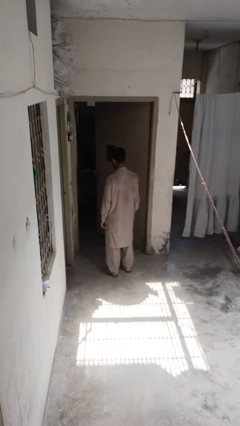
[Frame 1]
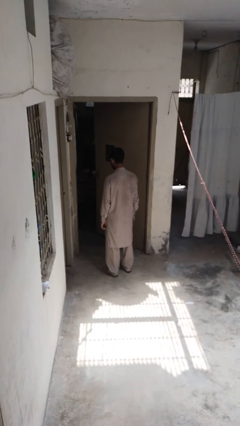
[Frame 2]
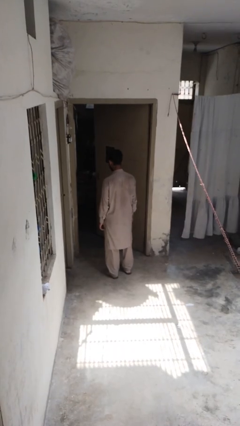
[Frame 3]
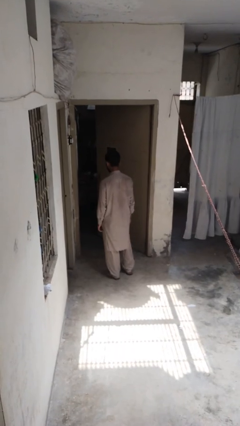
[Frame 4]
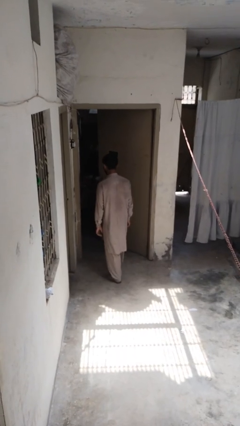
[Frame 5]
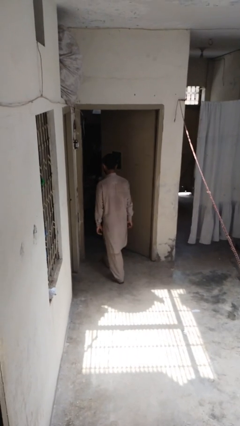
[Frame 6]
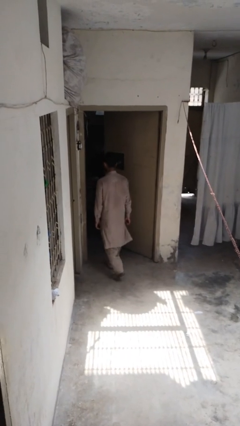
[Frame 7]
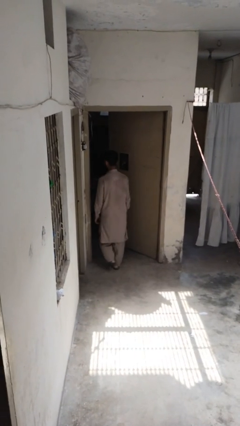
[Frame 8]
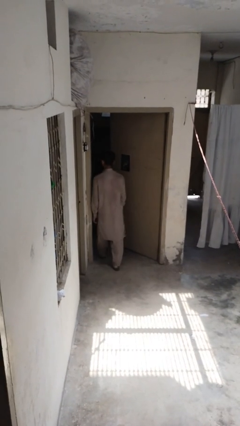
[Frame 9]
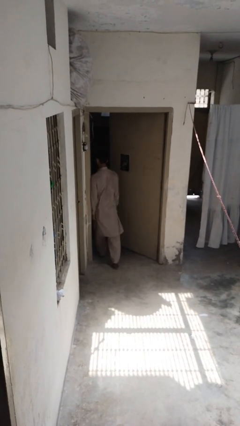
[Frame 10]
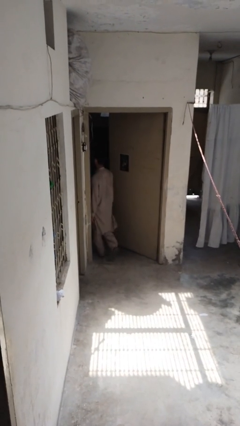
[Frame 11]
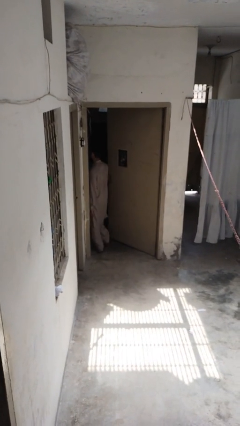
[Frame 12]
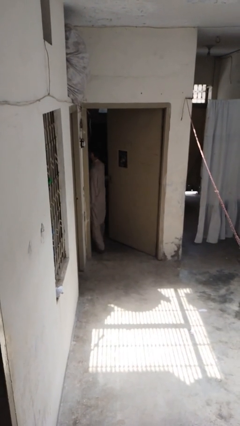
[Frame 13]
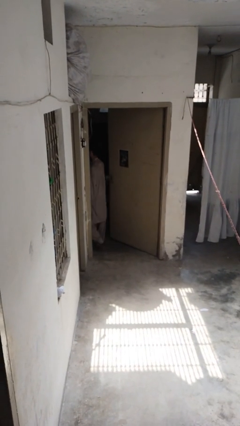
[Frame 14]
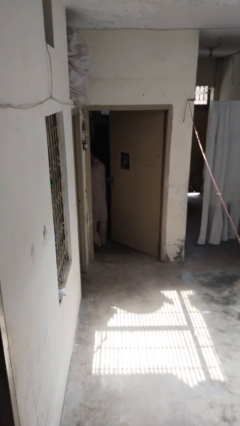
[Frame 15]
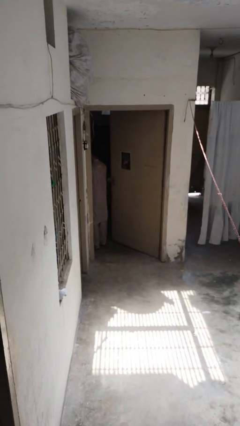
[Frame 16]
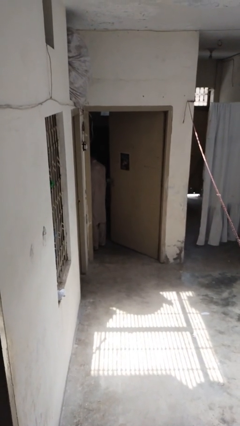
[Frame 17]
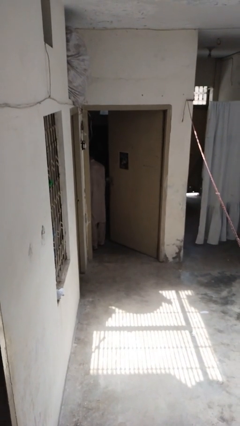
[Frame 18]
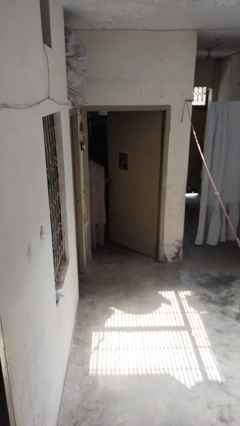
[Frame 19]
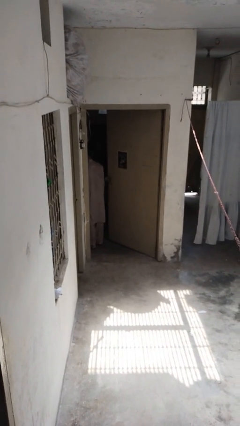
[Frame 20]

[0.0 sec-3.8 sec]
person bumps into wall

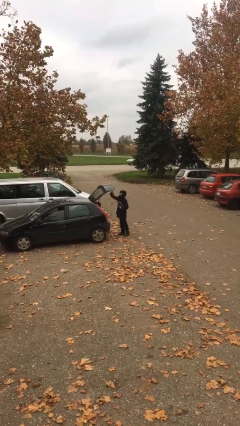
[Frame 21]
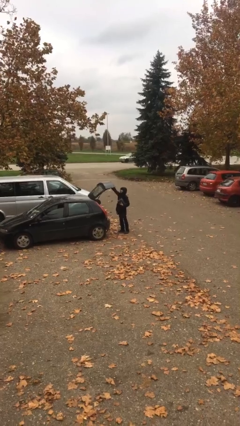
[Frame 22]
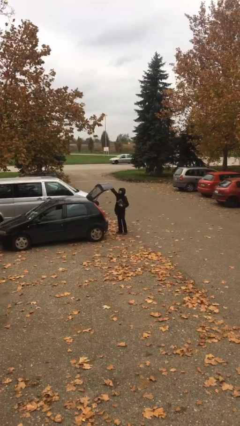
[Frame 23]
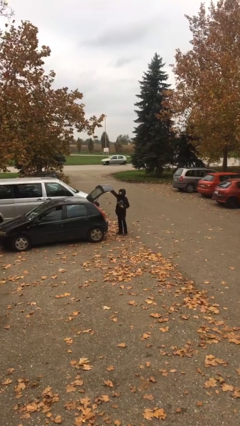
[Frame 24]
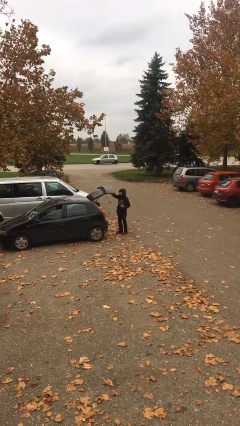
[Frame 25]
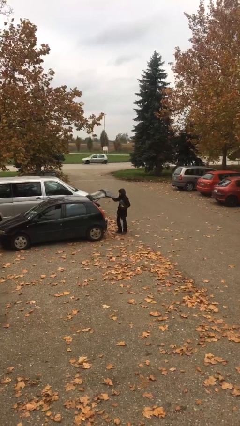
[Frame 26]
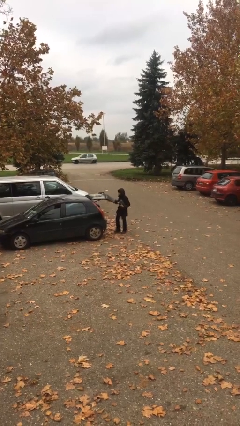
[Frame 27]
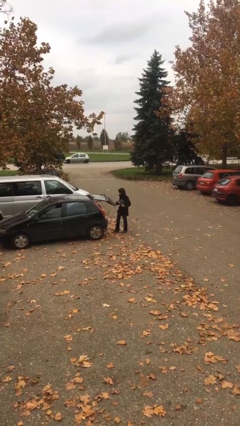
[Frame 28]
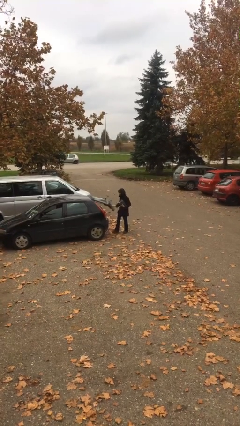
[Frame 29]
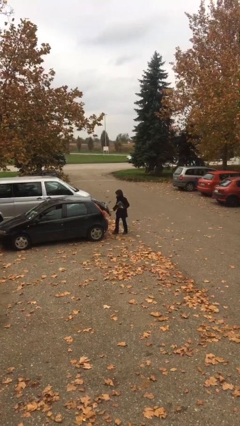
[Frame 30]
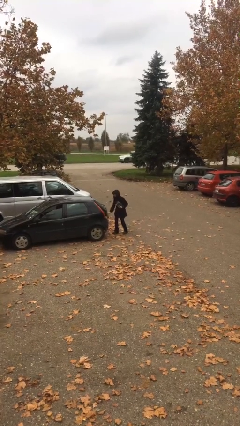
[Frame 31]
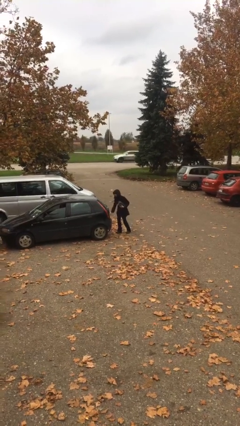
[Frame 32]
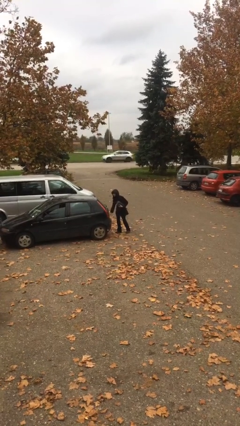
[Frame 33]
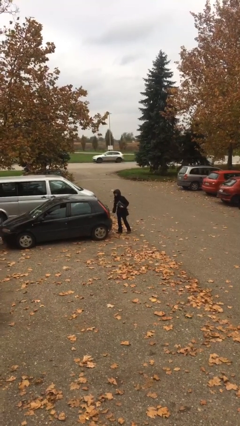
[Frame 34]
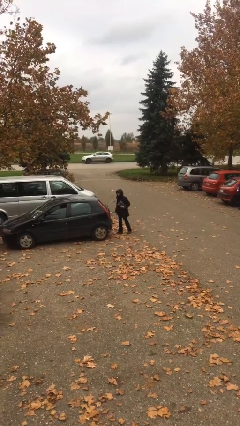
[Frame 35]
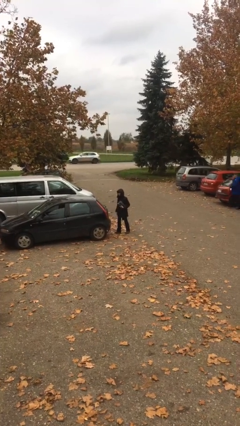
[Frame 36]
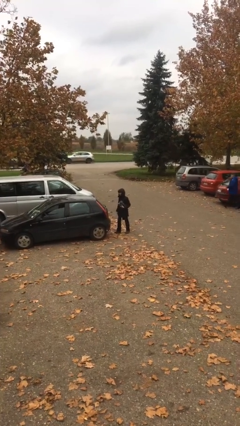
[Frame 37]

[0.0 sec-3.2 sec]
person closes car trunk

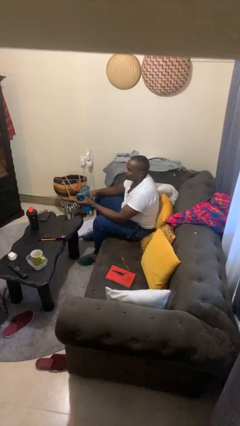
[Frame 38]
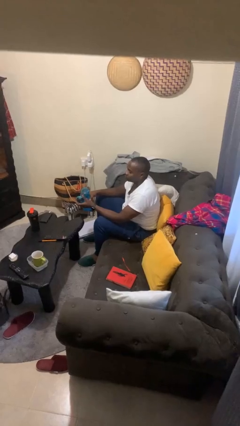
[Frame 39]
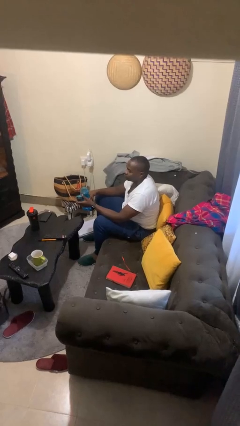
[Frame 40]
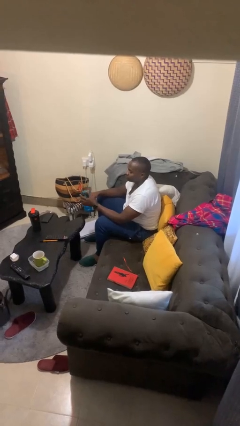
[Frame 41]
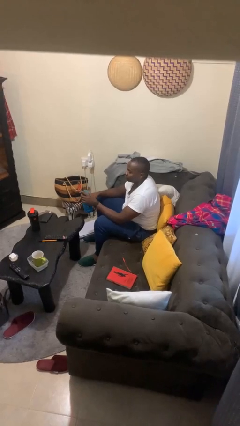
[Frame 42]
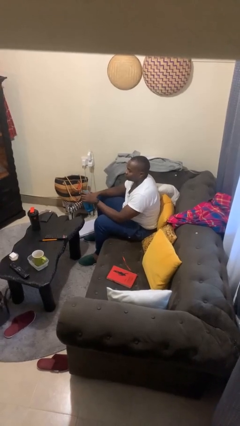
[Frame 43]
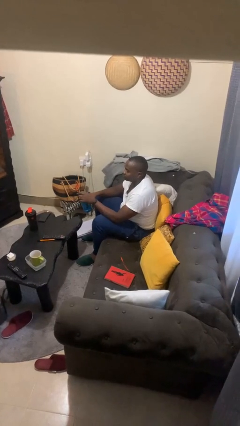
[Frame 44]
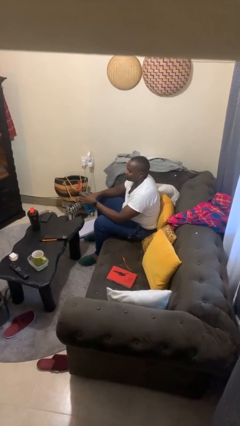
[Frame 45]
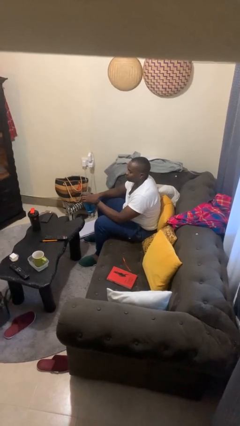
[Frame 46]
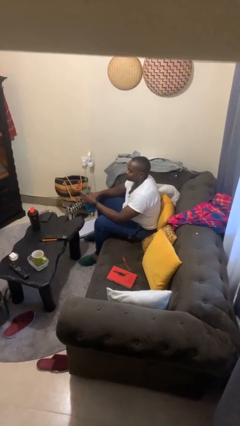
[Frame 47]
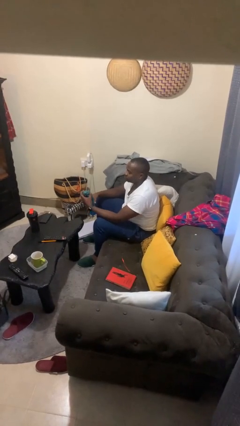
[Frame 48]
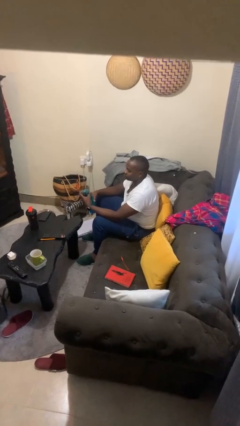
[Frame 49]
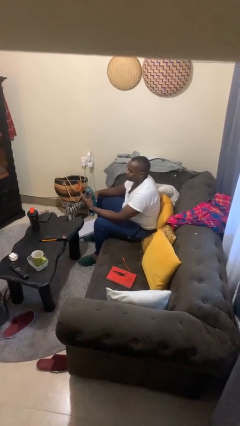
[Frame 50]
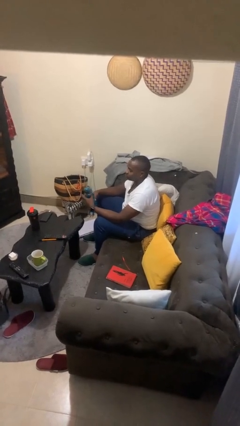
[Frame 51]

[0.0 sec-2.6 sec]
person screws lid to bottle

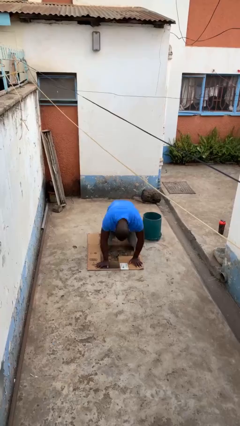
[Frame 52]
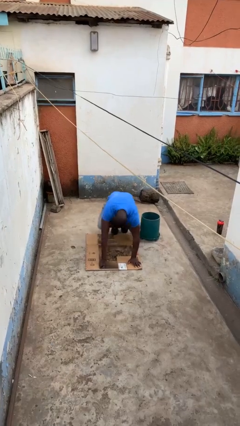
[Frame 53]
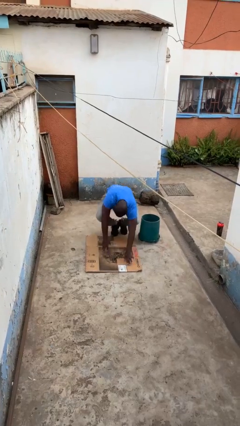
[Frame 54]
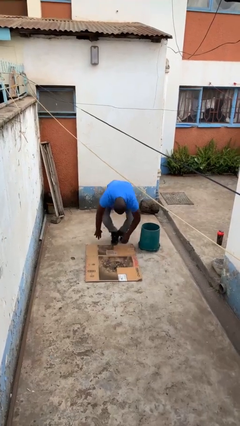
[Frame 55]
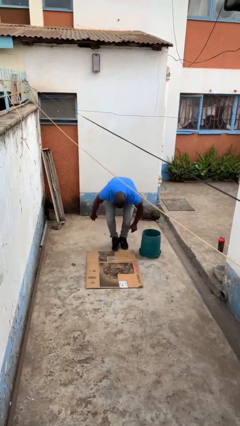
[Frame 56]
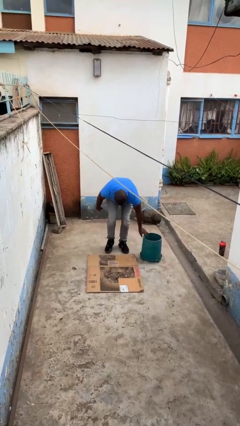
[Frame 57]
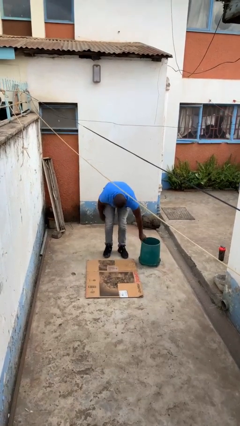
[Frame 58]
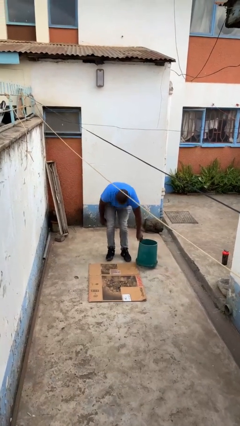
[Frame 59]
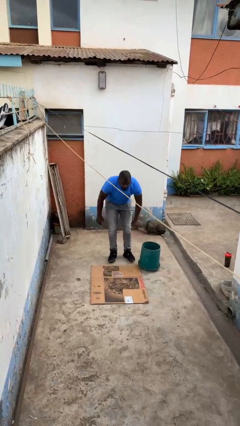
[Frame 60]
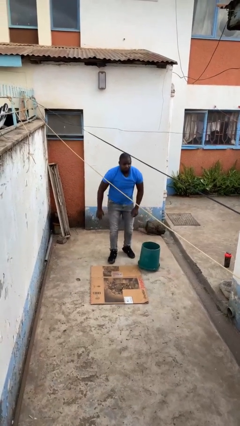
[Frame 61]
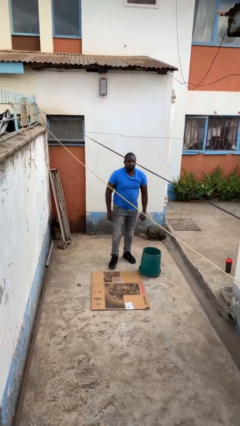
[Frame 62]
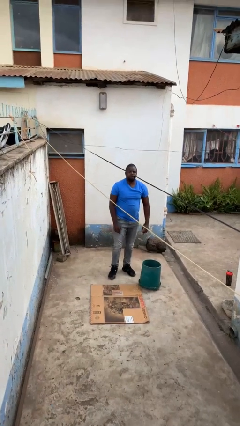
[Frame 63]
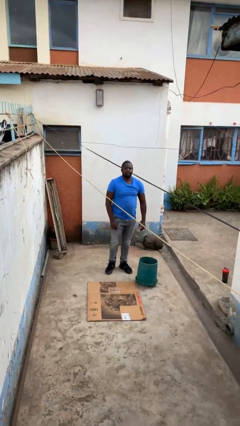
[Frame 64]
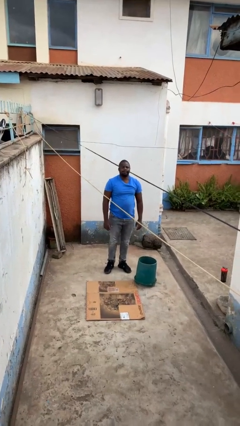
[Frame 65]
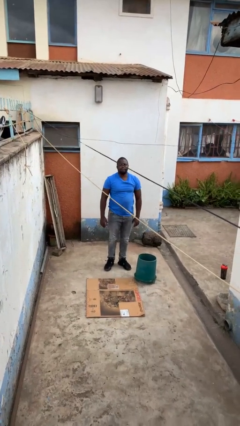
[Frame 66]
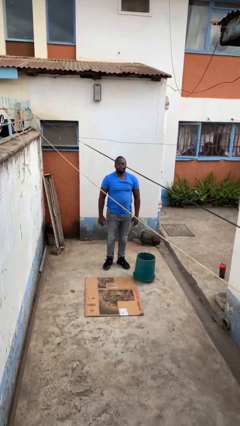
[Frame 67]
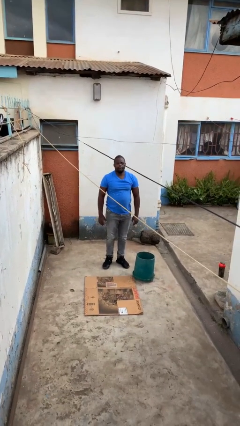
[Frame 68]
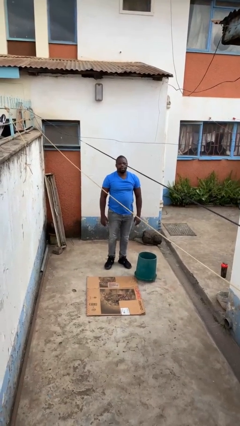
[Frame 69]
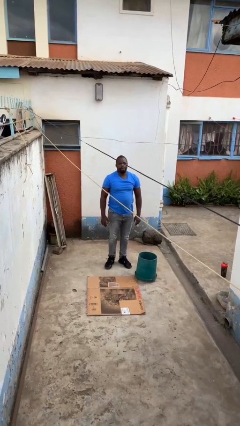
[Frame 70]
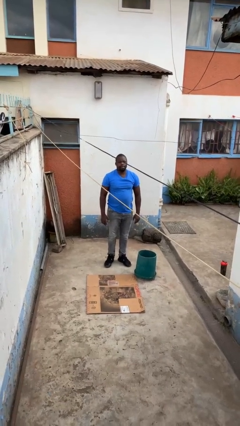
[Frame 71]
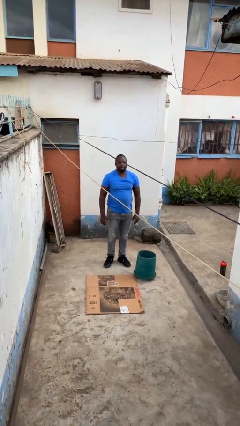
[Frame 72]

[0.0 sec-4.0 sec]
person stands up from floor

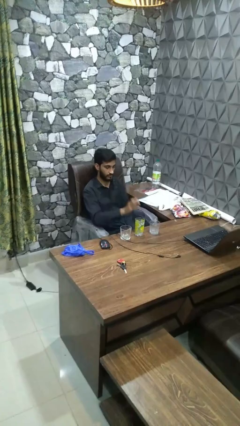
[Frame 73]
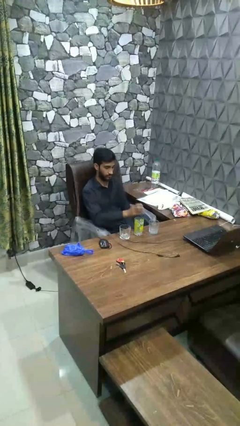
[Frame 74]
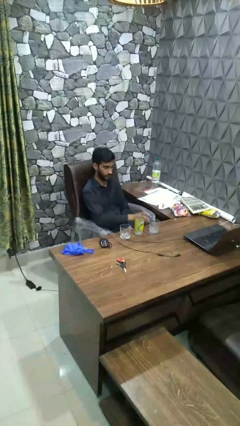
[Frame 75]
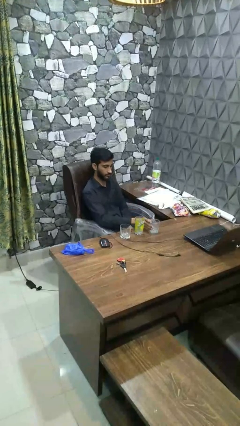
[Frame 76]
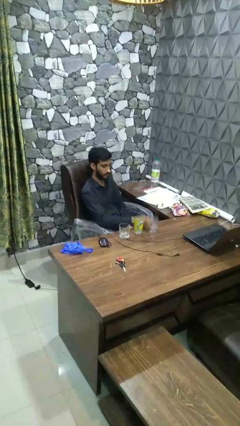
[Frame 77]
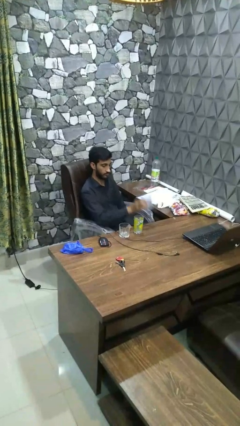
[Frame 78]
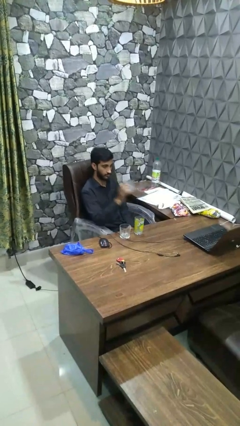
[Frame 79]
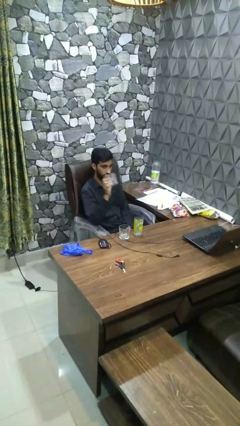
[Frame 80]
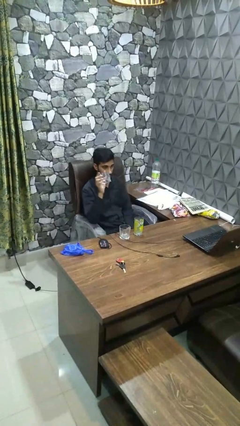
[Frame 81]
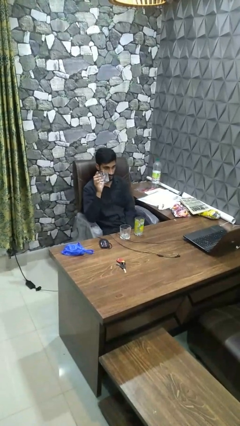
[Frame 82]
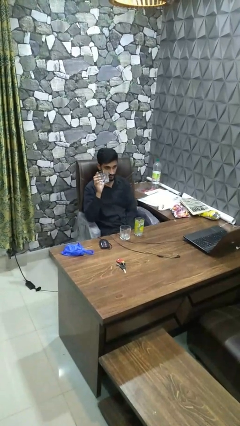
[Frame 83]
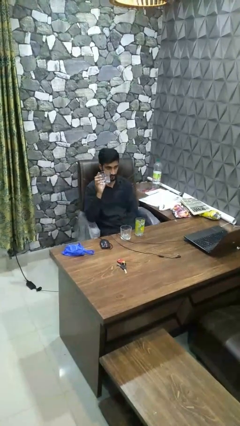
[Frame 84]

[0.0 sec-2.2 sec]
person picks up object from table

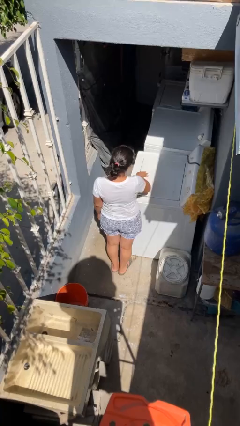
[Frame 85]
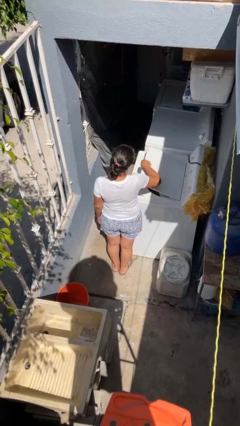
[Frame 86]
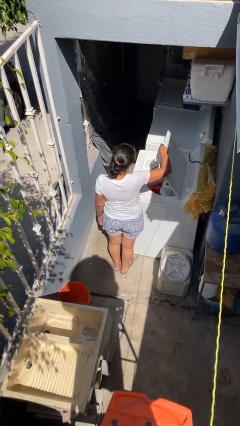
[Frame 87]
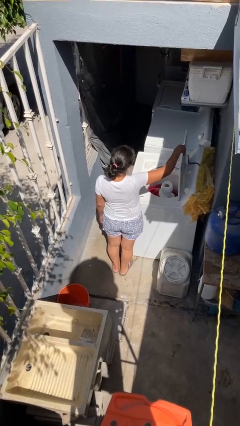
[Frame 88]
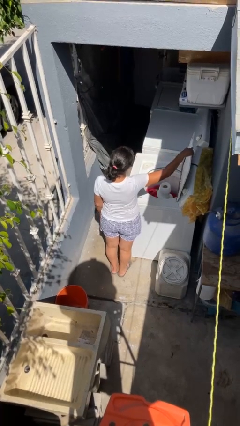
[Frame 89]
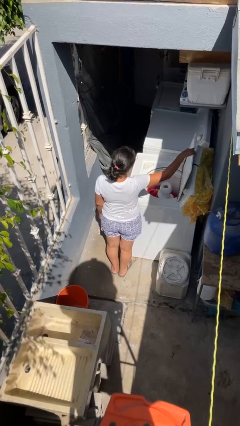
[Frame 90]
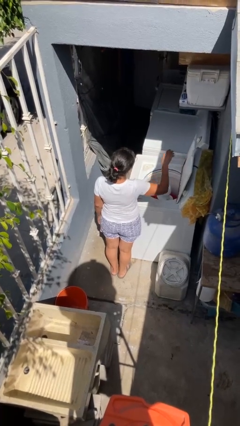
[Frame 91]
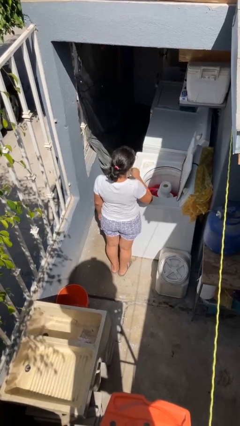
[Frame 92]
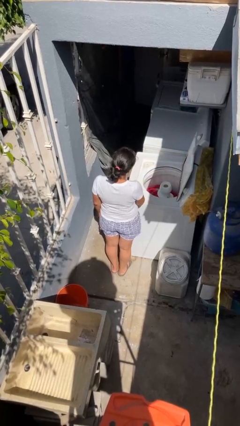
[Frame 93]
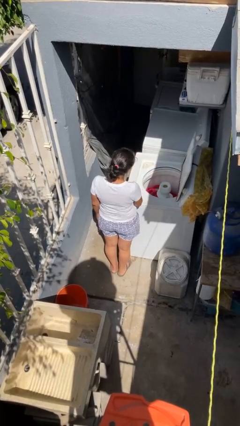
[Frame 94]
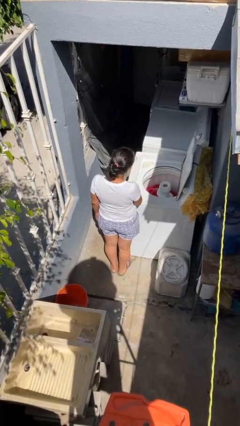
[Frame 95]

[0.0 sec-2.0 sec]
person opens clothes washer
